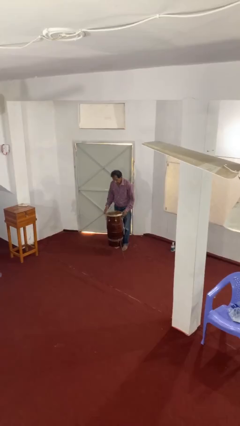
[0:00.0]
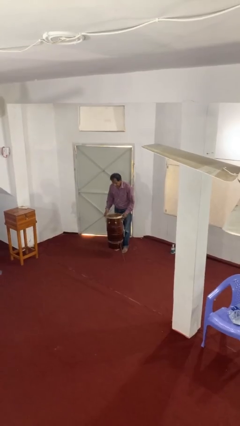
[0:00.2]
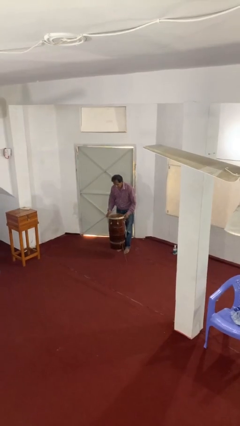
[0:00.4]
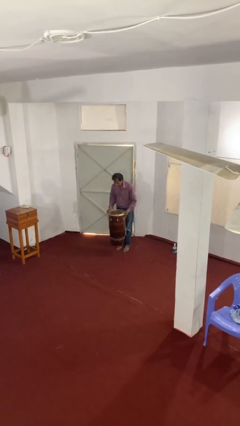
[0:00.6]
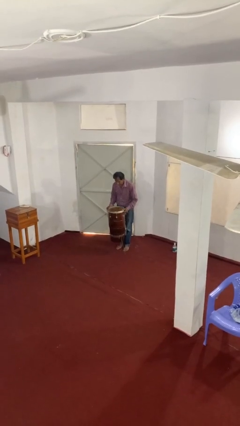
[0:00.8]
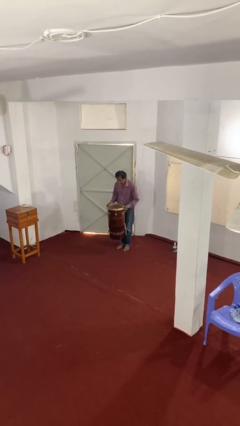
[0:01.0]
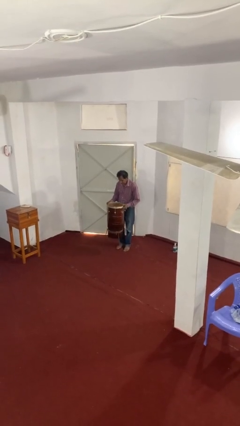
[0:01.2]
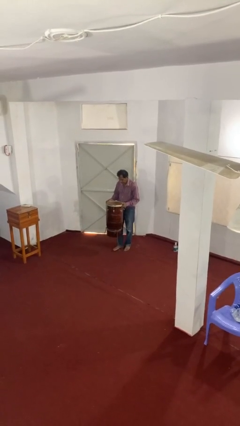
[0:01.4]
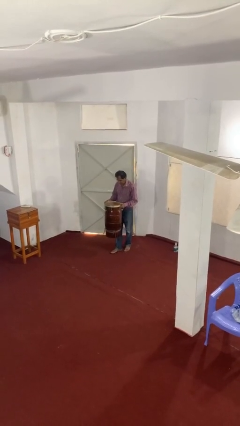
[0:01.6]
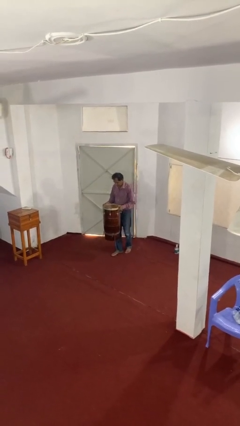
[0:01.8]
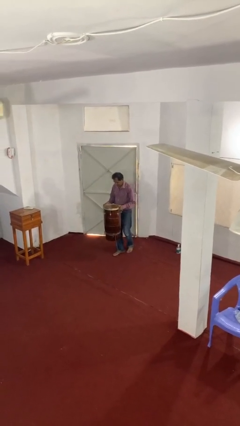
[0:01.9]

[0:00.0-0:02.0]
person picks up object from floor

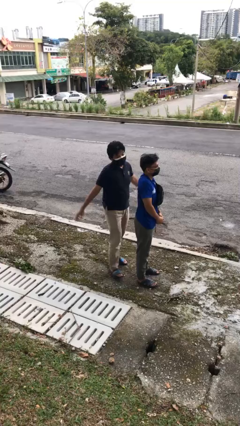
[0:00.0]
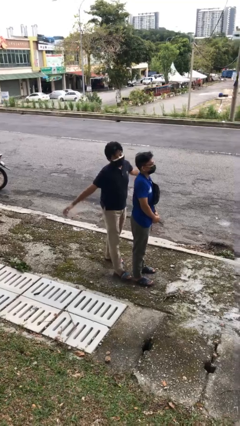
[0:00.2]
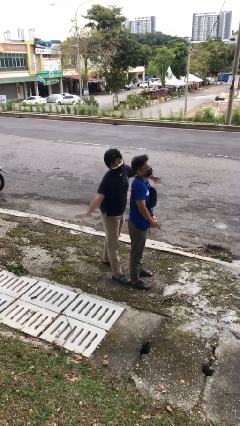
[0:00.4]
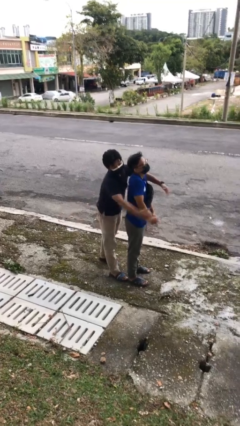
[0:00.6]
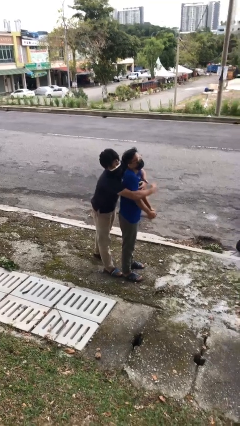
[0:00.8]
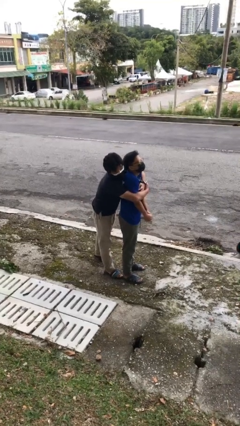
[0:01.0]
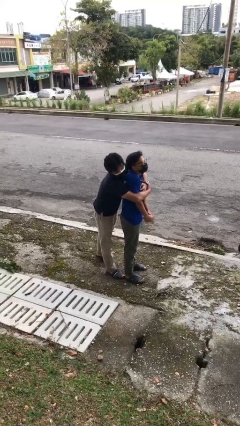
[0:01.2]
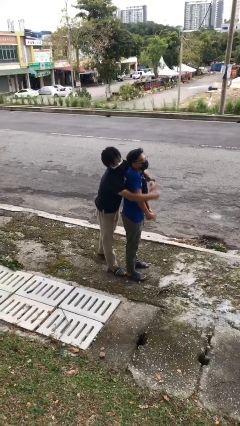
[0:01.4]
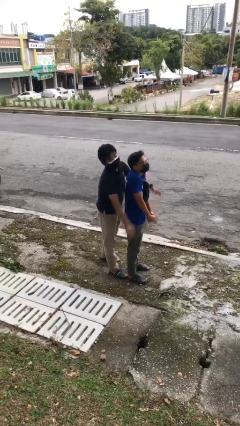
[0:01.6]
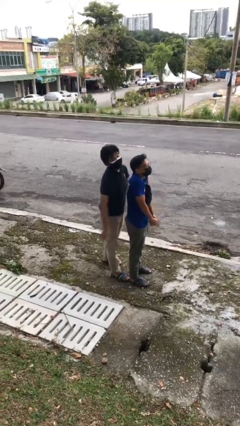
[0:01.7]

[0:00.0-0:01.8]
person hugs person from behind

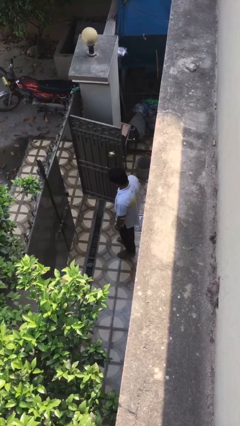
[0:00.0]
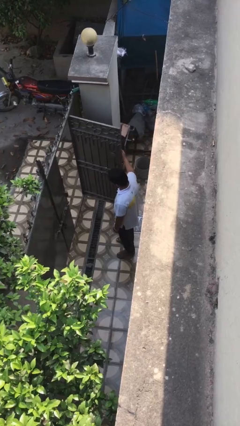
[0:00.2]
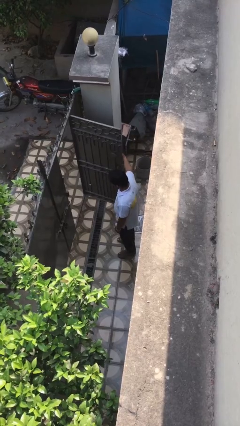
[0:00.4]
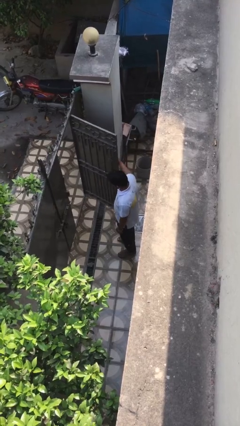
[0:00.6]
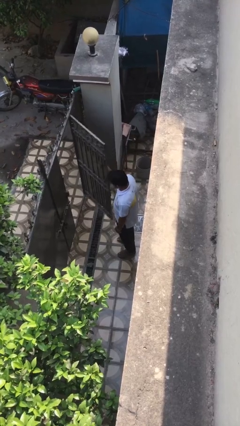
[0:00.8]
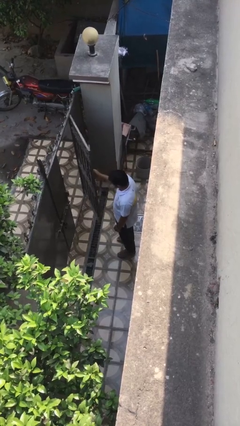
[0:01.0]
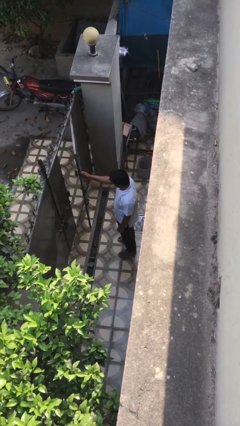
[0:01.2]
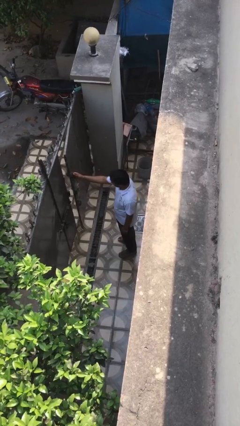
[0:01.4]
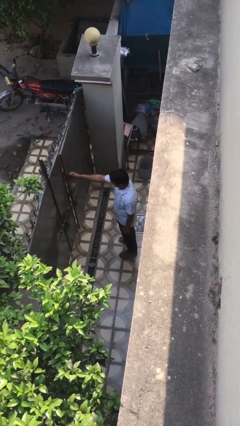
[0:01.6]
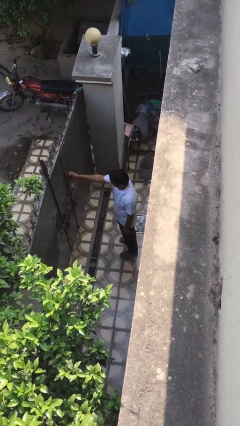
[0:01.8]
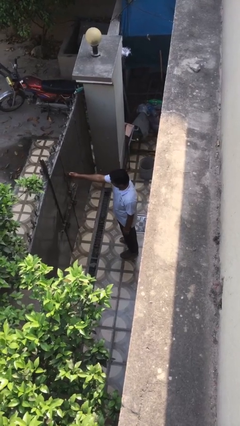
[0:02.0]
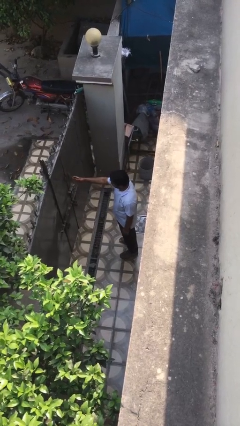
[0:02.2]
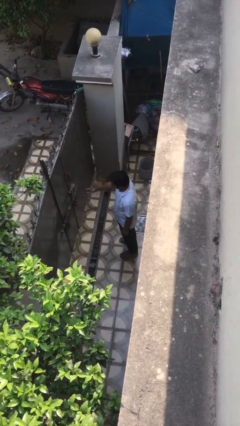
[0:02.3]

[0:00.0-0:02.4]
person closes facility door

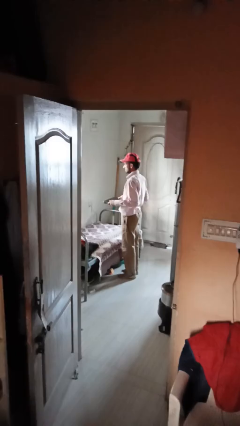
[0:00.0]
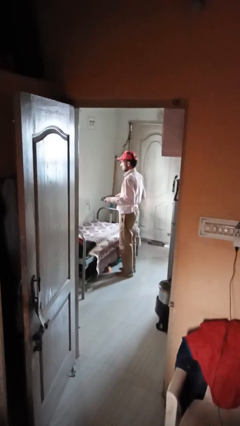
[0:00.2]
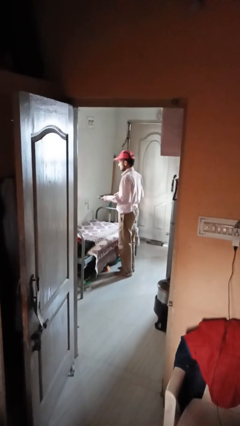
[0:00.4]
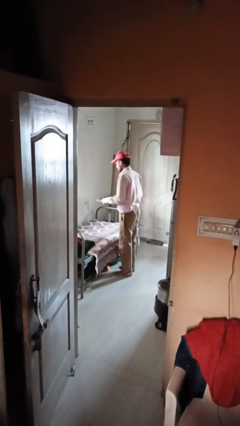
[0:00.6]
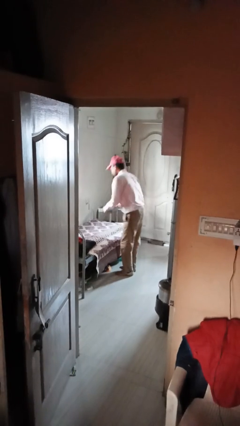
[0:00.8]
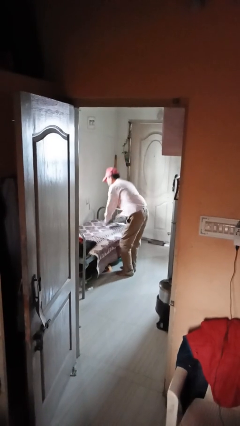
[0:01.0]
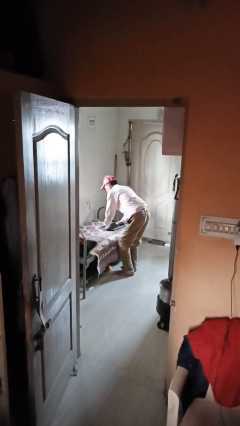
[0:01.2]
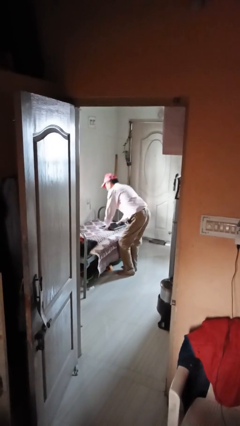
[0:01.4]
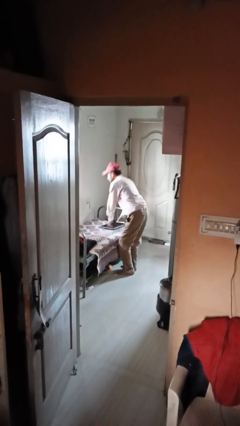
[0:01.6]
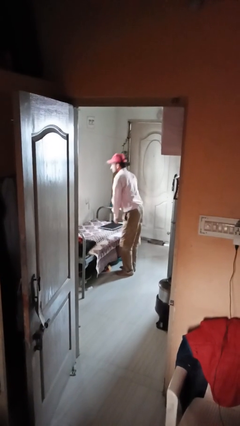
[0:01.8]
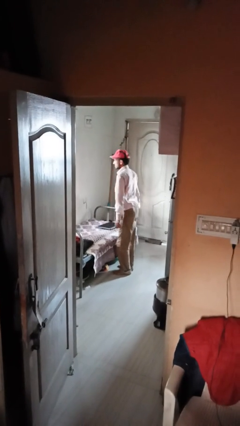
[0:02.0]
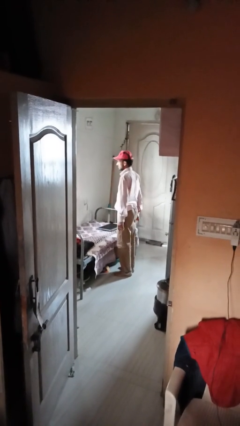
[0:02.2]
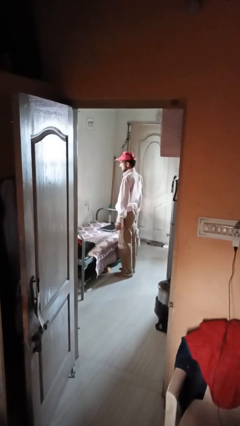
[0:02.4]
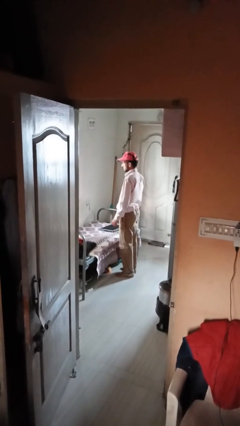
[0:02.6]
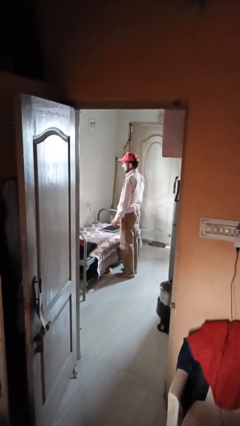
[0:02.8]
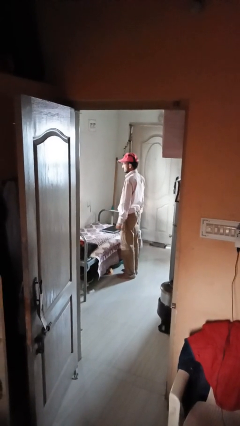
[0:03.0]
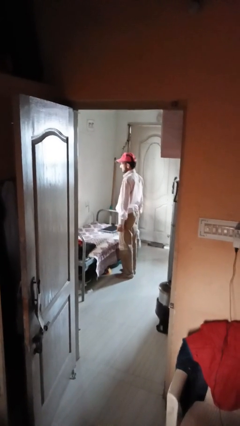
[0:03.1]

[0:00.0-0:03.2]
person puts down object on couch

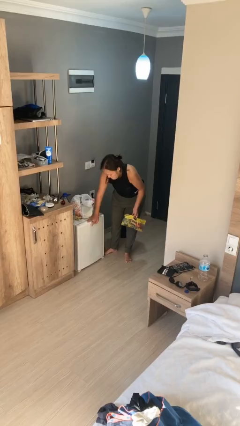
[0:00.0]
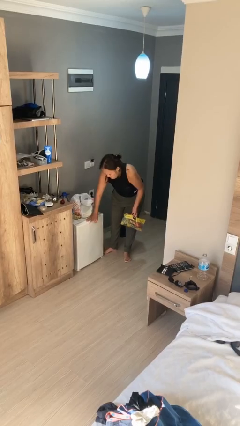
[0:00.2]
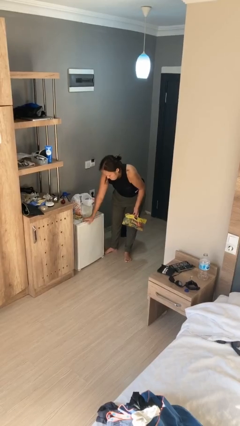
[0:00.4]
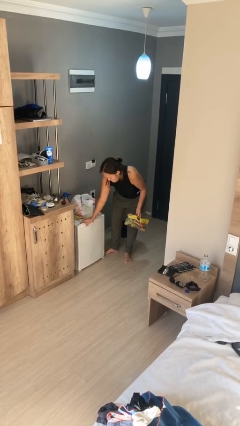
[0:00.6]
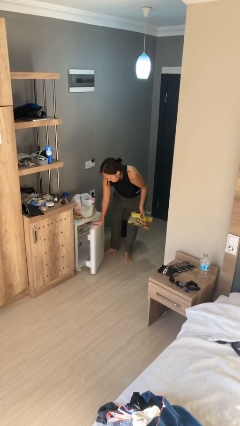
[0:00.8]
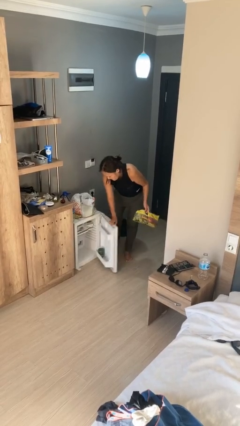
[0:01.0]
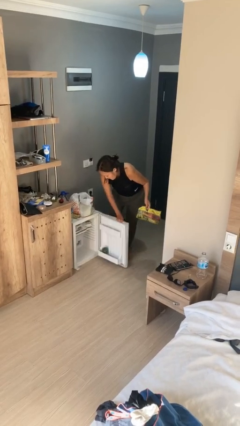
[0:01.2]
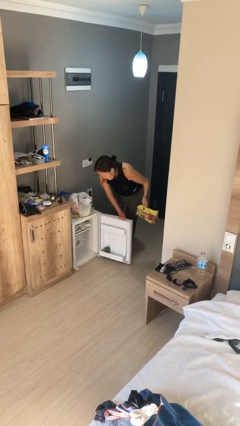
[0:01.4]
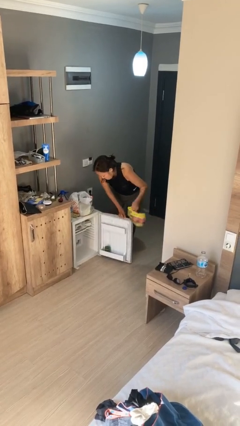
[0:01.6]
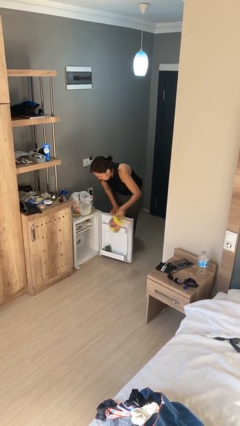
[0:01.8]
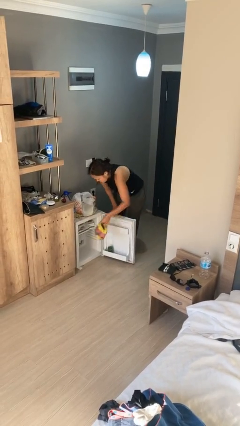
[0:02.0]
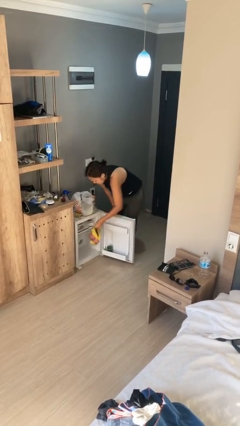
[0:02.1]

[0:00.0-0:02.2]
person opens refrigerator

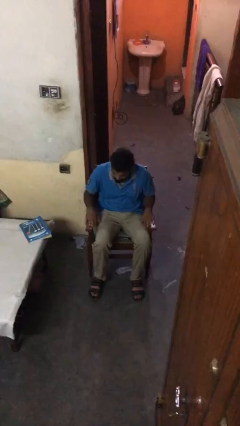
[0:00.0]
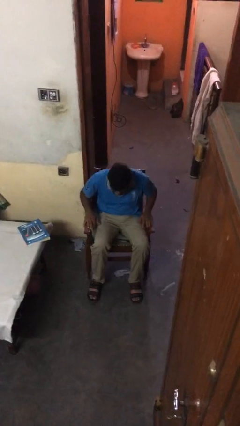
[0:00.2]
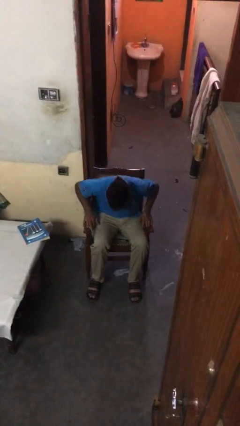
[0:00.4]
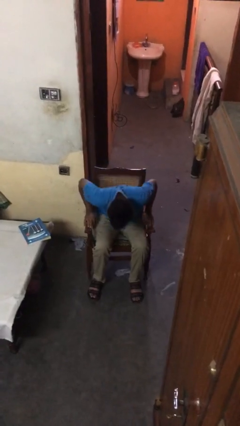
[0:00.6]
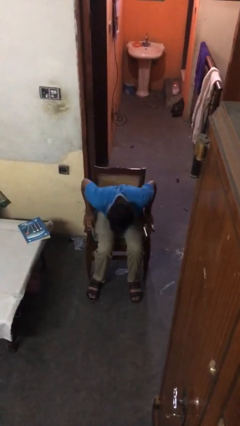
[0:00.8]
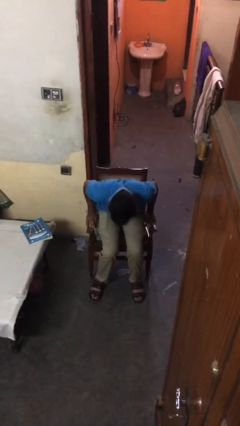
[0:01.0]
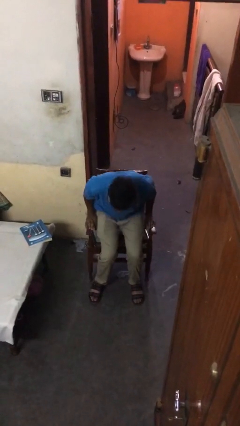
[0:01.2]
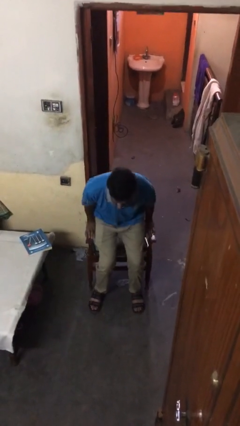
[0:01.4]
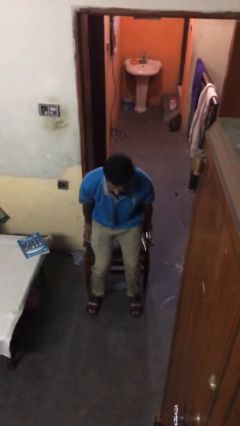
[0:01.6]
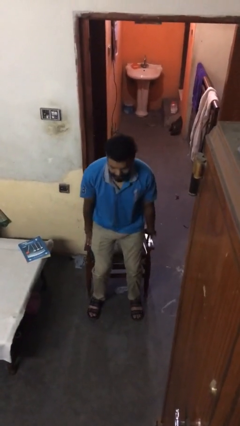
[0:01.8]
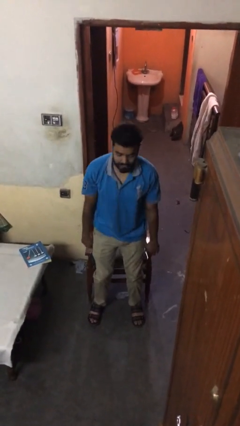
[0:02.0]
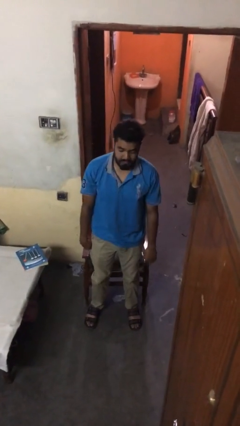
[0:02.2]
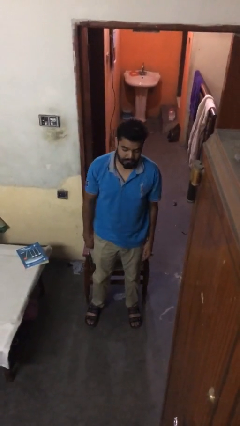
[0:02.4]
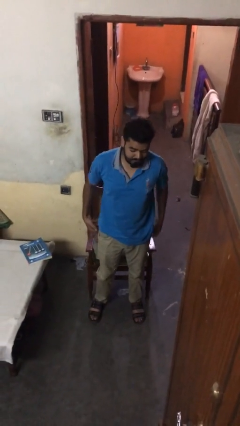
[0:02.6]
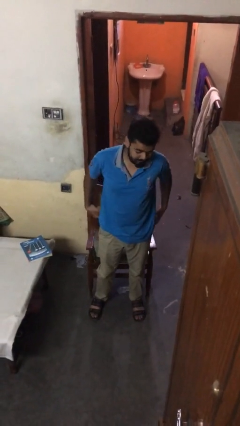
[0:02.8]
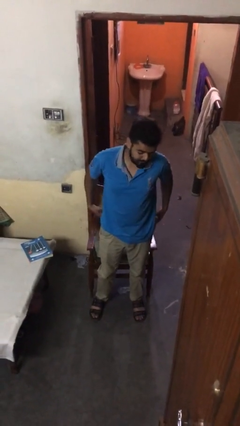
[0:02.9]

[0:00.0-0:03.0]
person stands up

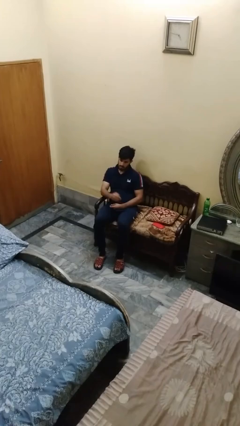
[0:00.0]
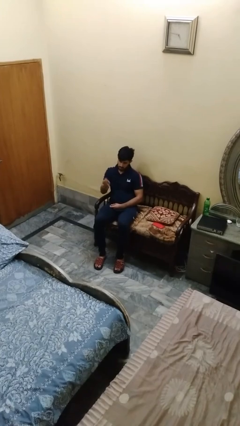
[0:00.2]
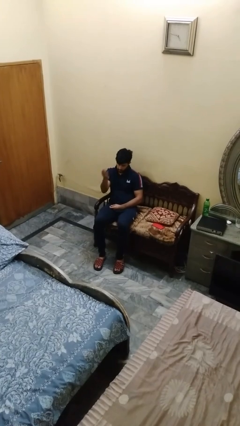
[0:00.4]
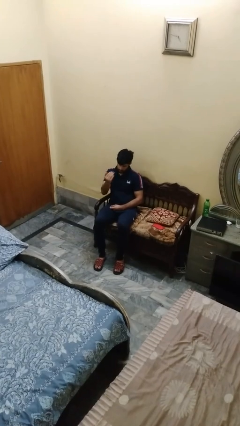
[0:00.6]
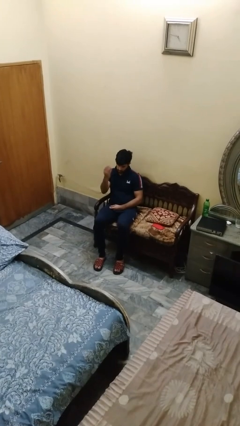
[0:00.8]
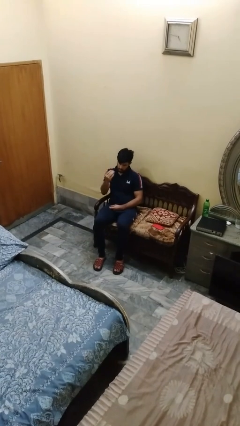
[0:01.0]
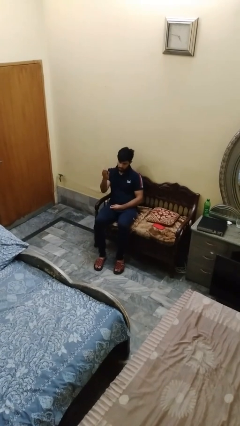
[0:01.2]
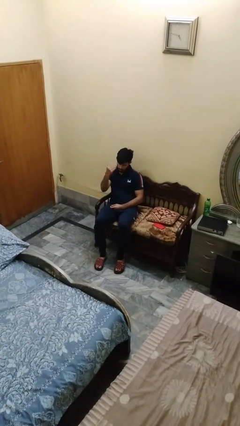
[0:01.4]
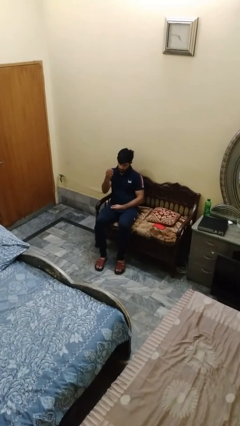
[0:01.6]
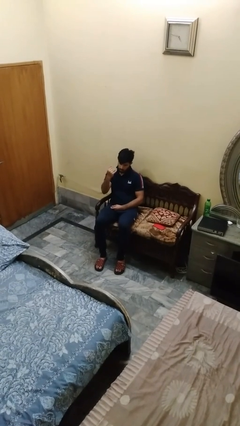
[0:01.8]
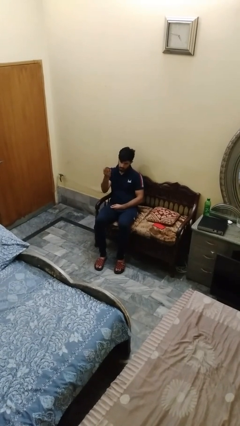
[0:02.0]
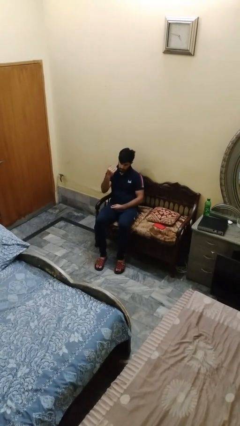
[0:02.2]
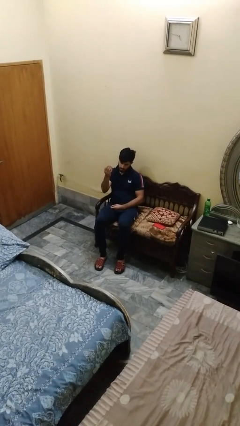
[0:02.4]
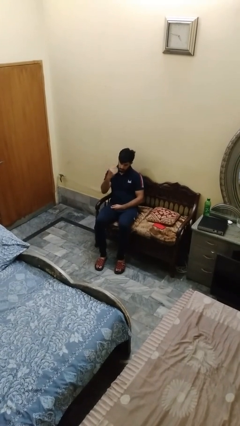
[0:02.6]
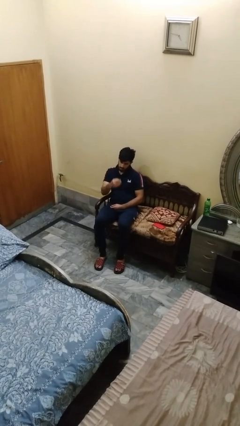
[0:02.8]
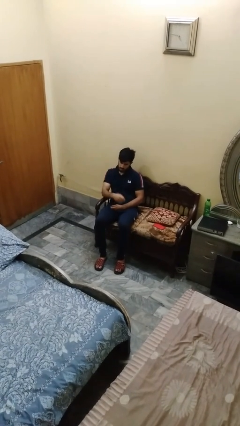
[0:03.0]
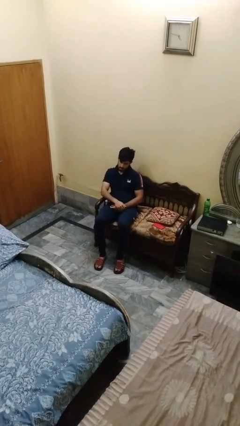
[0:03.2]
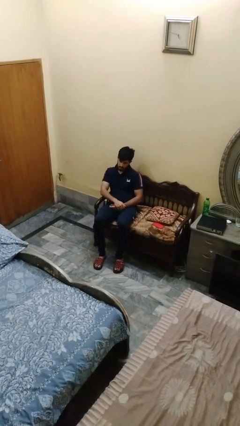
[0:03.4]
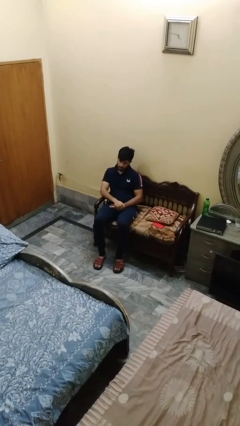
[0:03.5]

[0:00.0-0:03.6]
person gestures come here
